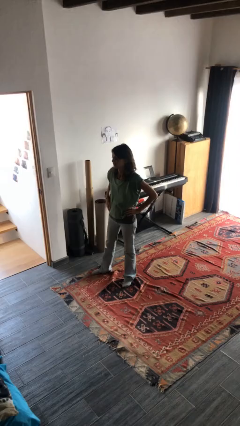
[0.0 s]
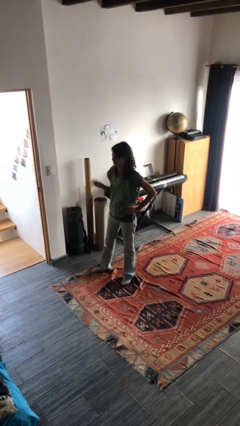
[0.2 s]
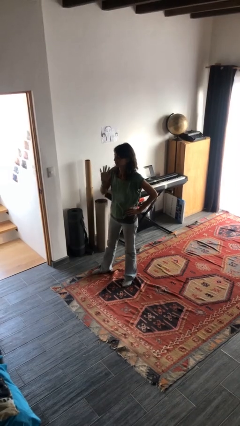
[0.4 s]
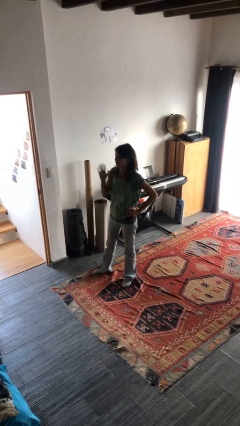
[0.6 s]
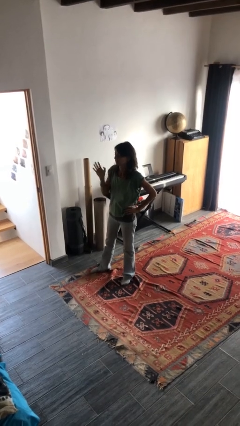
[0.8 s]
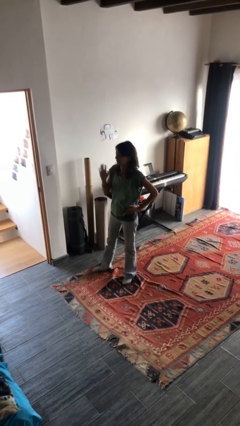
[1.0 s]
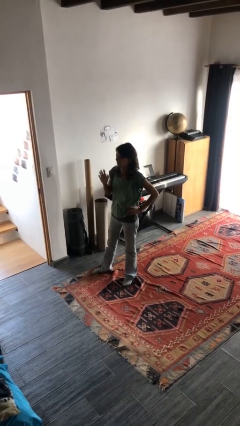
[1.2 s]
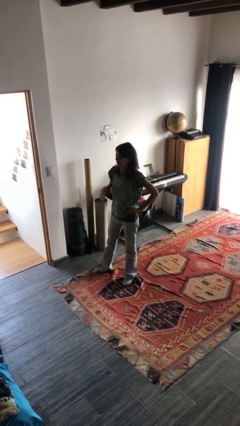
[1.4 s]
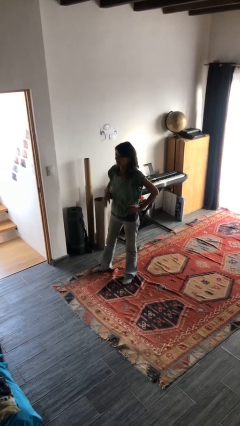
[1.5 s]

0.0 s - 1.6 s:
person waves at person

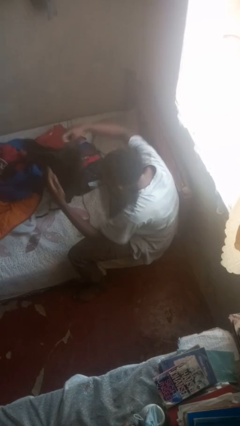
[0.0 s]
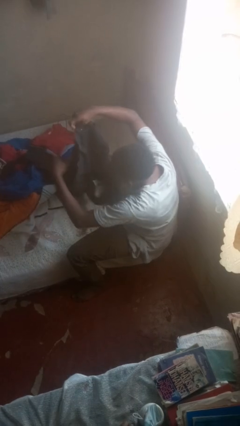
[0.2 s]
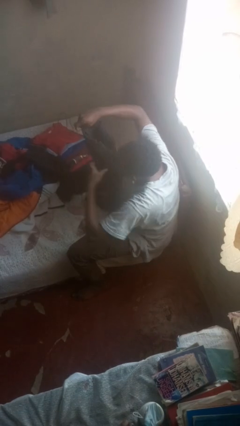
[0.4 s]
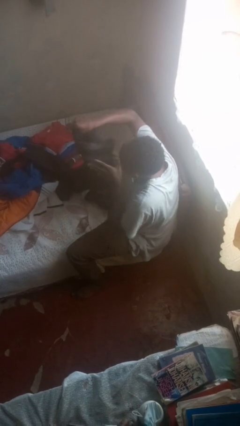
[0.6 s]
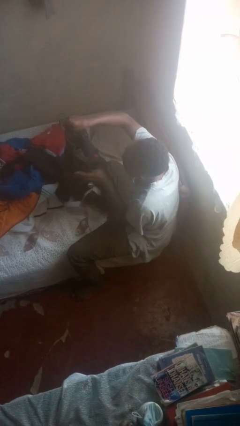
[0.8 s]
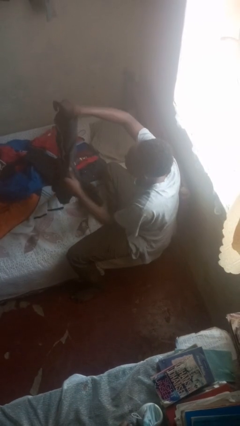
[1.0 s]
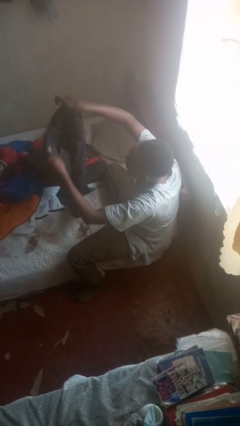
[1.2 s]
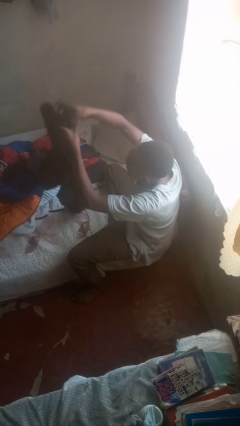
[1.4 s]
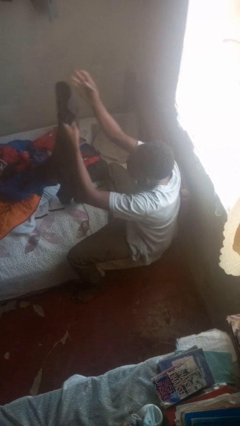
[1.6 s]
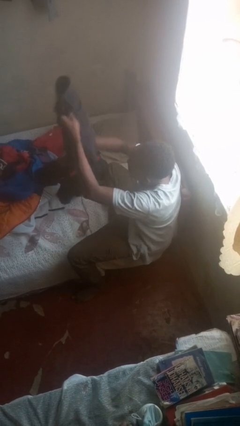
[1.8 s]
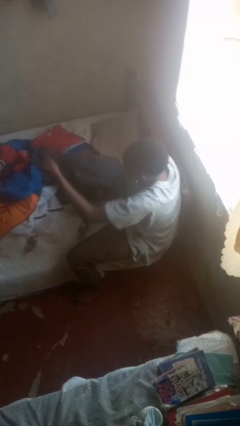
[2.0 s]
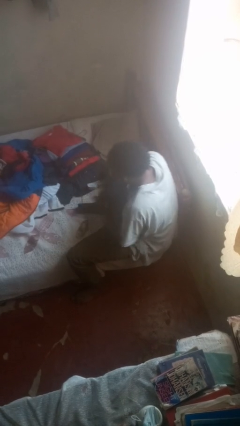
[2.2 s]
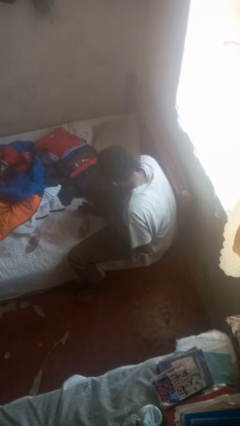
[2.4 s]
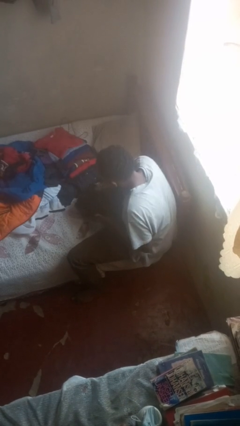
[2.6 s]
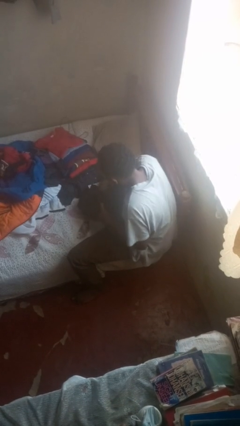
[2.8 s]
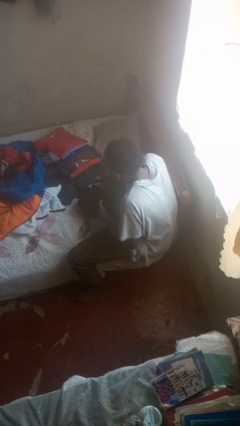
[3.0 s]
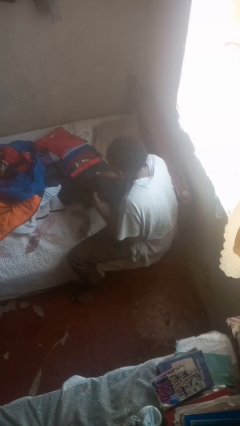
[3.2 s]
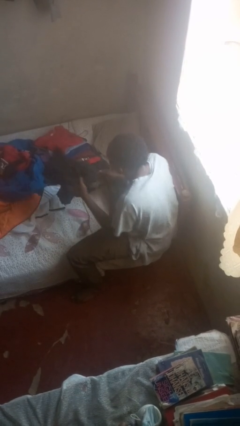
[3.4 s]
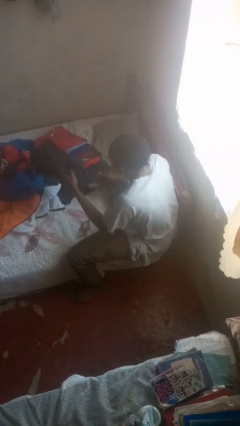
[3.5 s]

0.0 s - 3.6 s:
person folds pants

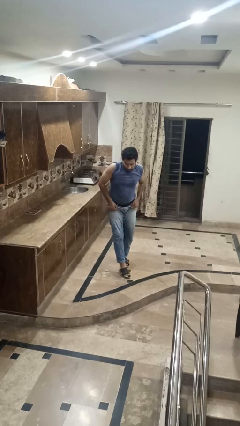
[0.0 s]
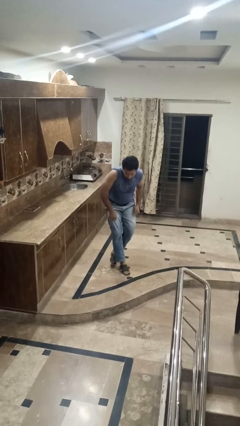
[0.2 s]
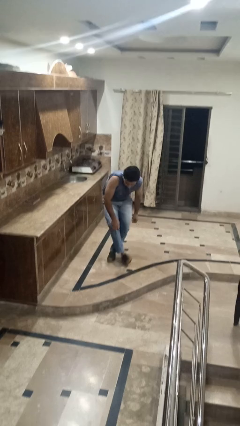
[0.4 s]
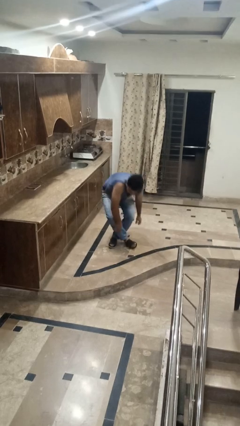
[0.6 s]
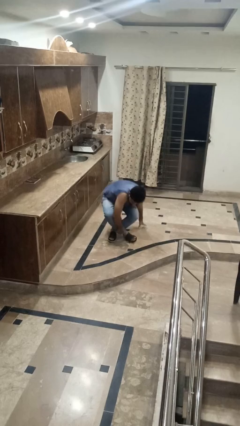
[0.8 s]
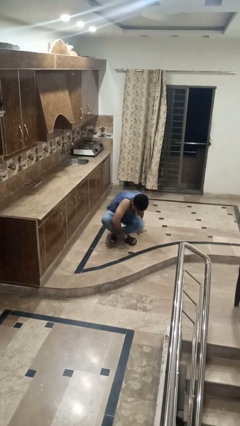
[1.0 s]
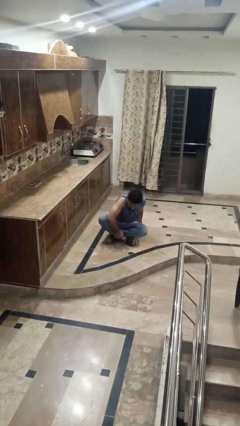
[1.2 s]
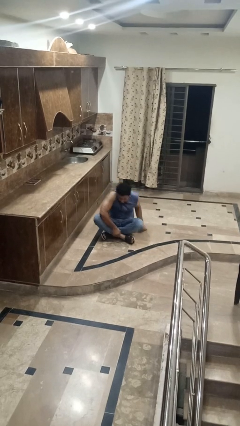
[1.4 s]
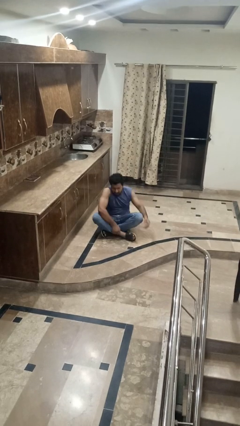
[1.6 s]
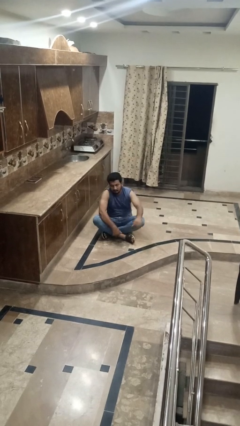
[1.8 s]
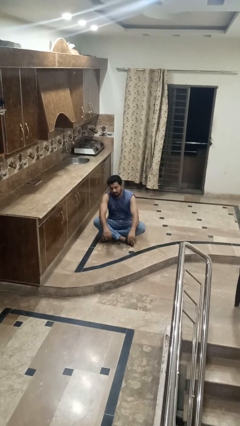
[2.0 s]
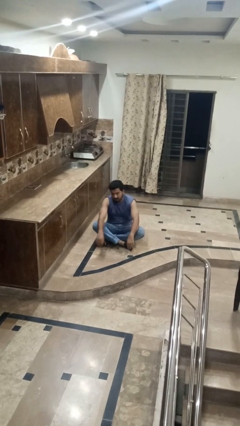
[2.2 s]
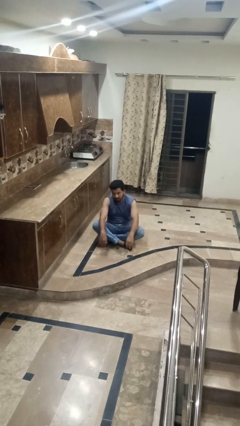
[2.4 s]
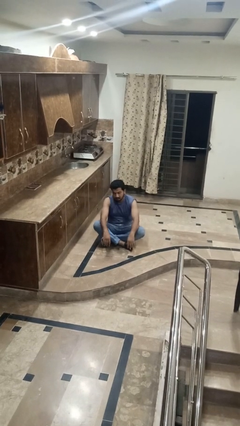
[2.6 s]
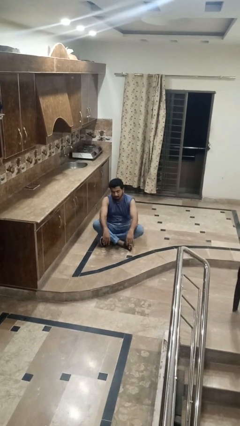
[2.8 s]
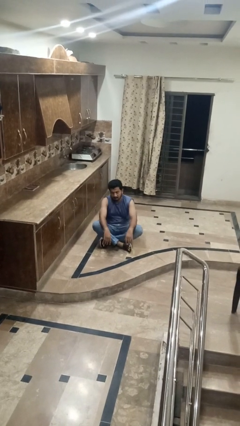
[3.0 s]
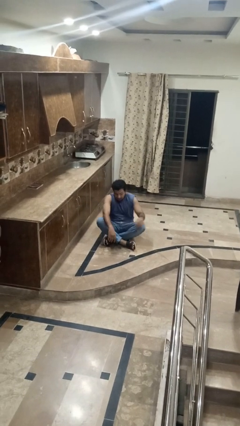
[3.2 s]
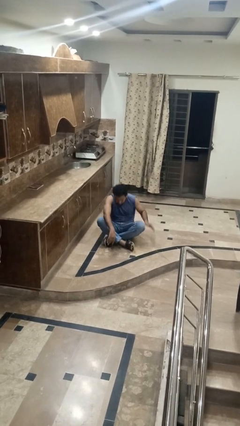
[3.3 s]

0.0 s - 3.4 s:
person sits crisscross

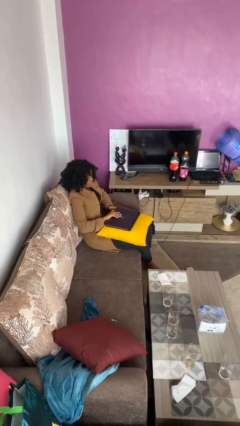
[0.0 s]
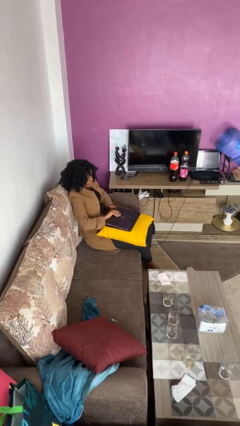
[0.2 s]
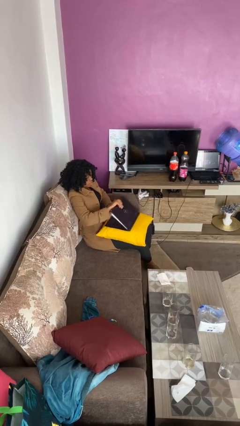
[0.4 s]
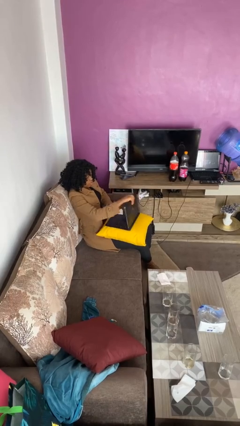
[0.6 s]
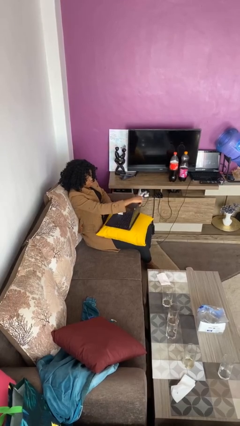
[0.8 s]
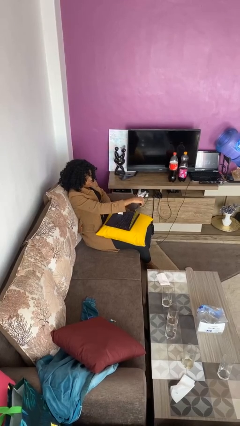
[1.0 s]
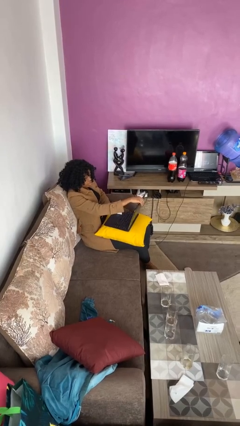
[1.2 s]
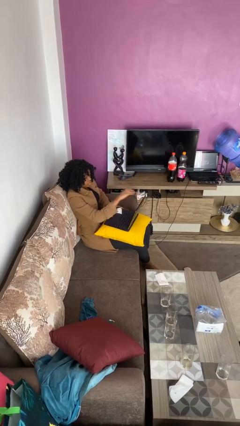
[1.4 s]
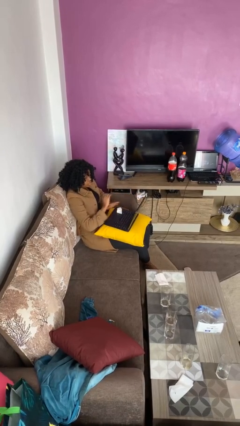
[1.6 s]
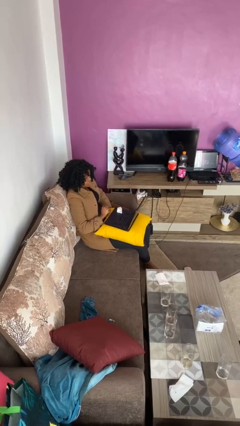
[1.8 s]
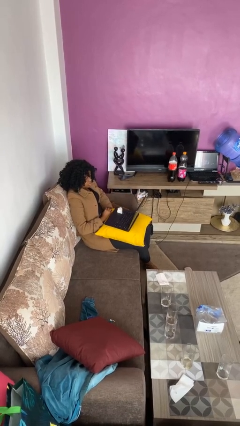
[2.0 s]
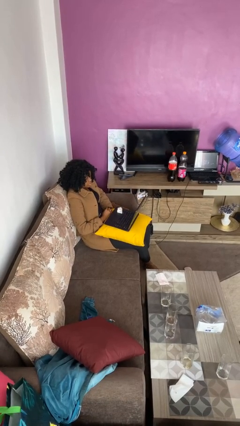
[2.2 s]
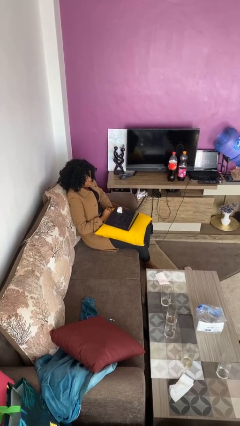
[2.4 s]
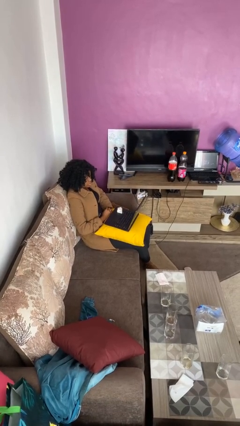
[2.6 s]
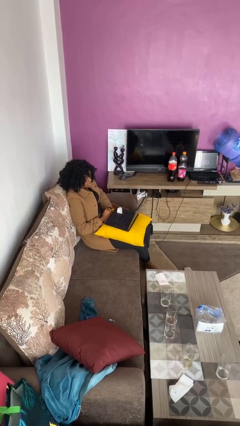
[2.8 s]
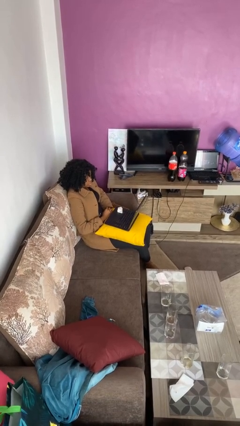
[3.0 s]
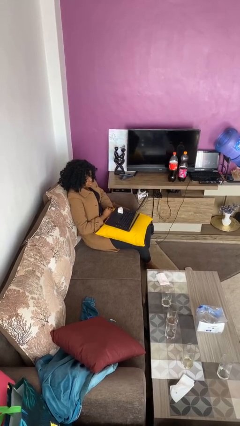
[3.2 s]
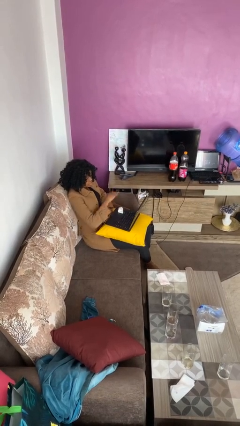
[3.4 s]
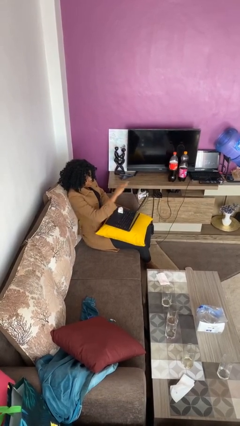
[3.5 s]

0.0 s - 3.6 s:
person opens laptop

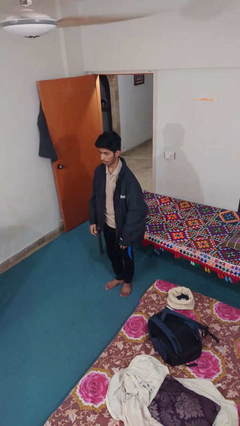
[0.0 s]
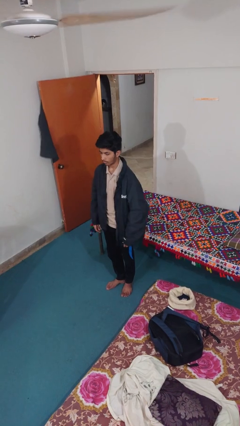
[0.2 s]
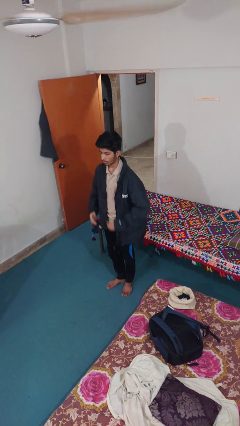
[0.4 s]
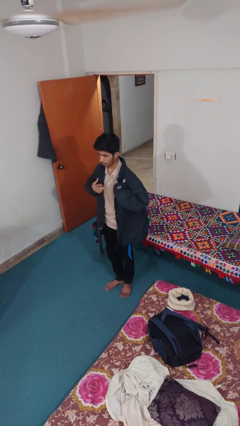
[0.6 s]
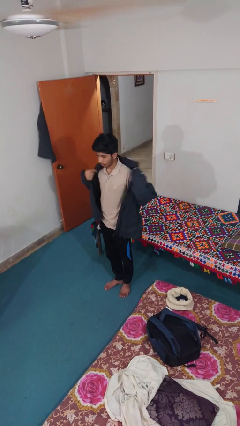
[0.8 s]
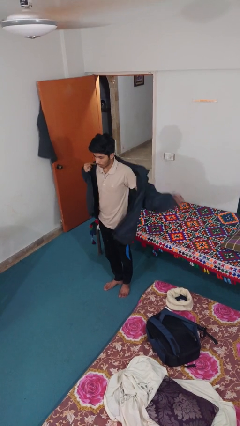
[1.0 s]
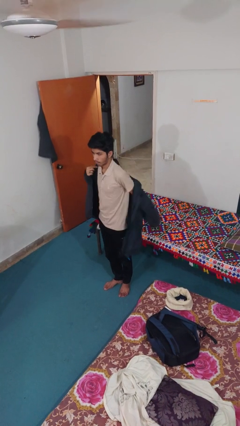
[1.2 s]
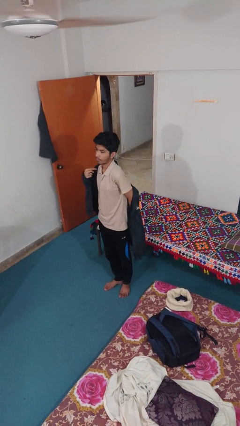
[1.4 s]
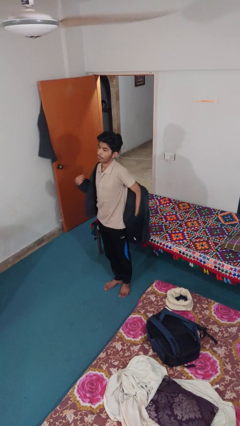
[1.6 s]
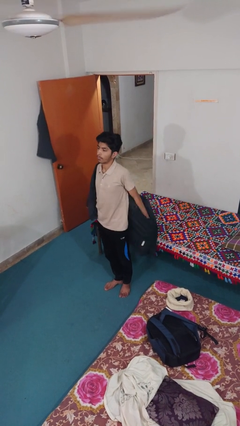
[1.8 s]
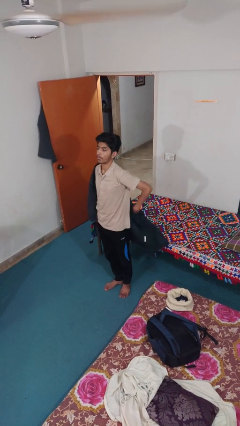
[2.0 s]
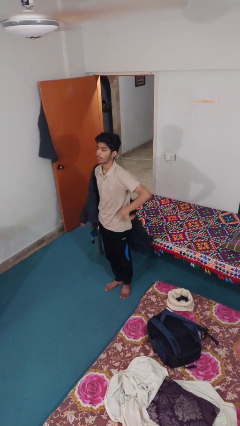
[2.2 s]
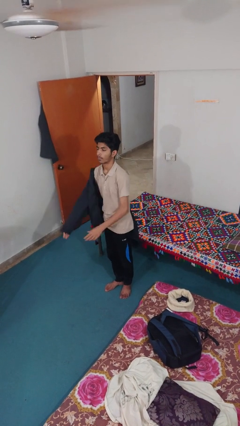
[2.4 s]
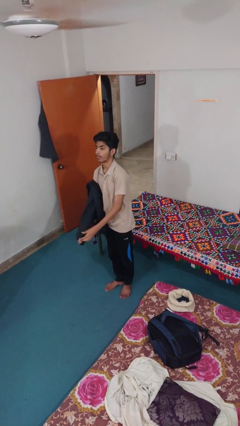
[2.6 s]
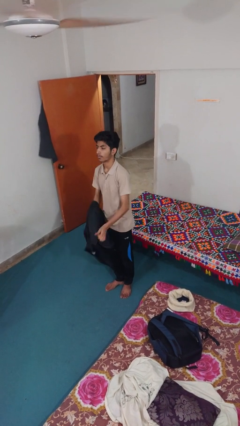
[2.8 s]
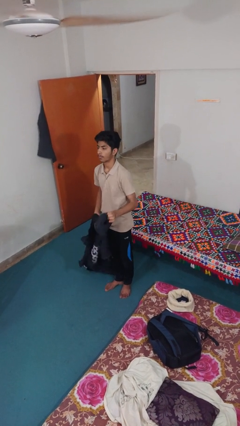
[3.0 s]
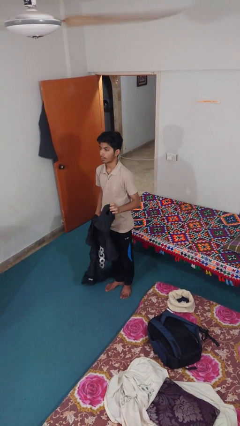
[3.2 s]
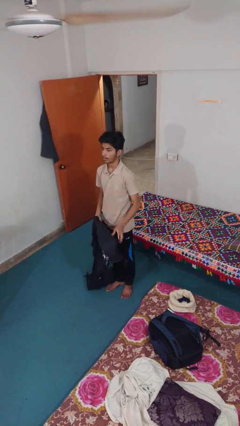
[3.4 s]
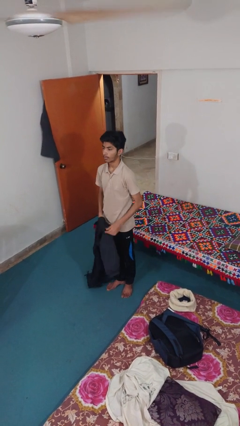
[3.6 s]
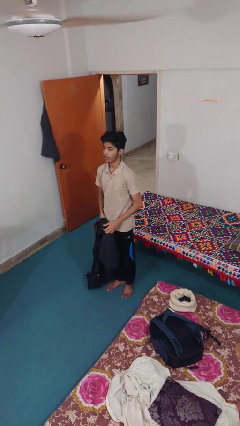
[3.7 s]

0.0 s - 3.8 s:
person takes off jacket

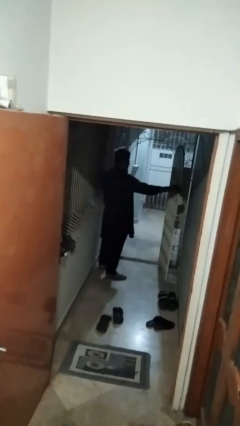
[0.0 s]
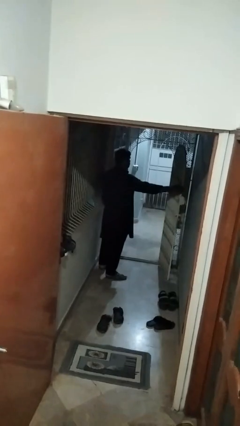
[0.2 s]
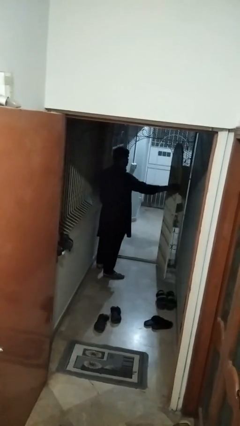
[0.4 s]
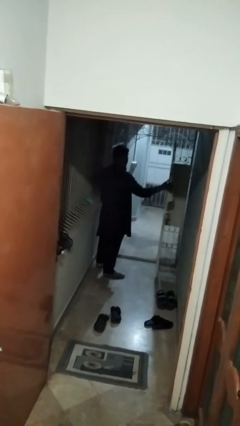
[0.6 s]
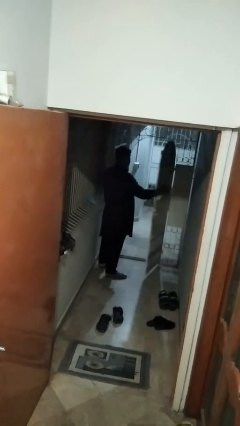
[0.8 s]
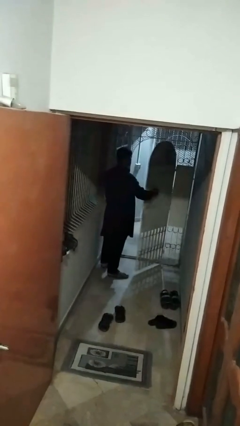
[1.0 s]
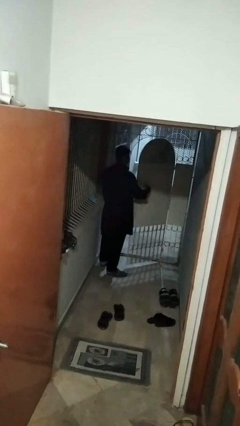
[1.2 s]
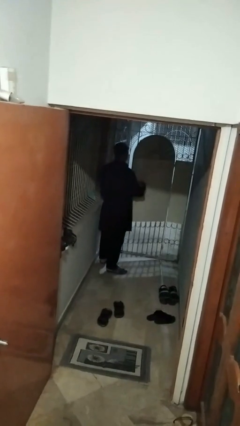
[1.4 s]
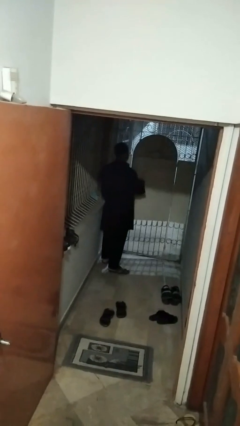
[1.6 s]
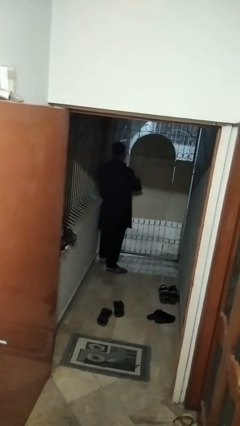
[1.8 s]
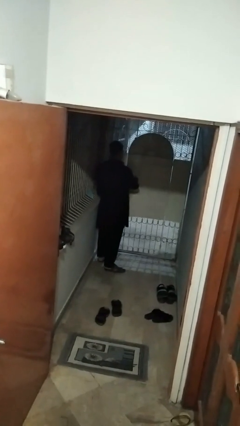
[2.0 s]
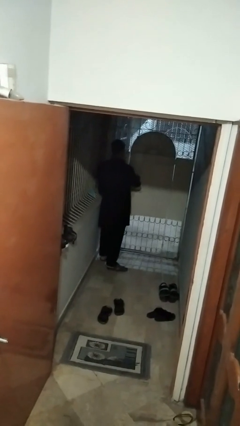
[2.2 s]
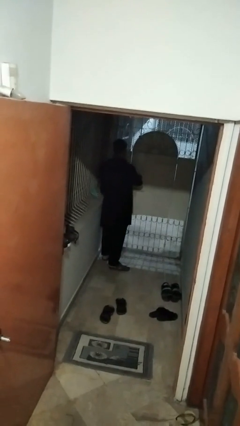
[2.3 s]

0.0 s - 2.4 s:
person closes gate
